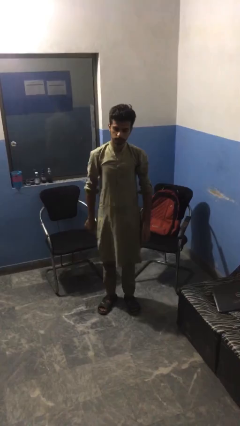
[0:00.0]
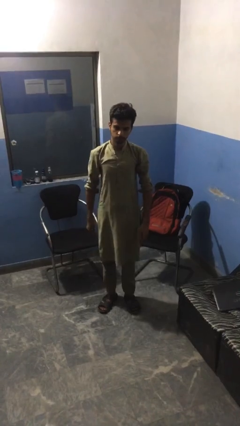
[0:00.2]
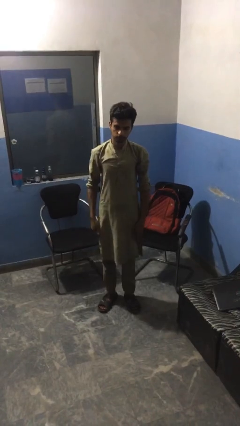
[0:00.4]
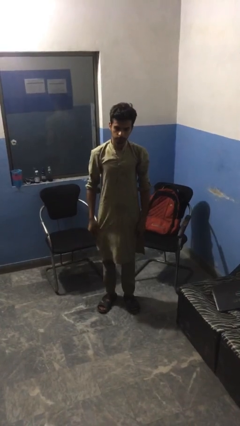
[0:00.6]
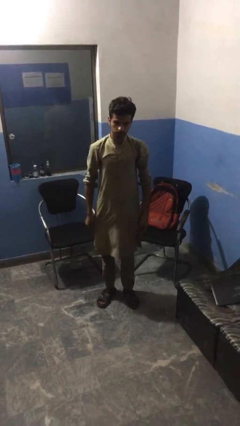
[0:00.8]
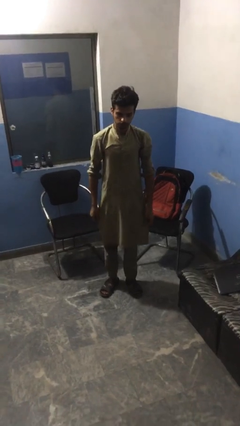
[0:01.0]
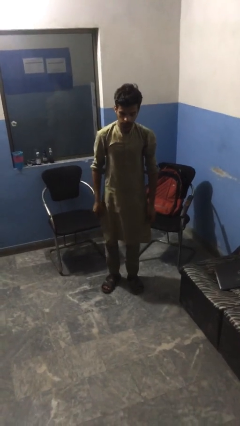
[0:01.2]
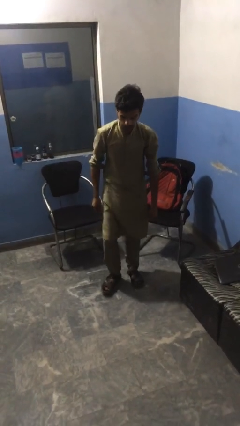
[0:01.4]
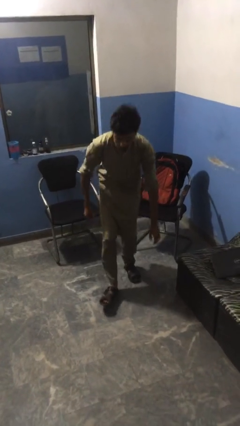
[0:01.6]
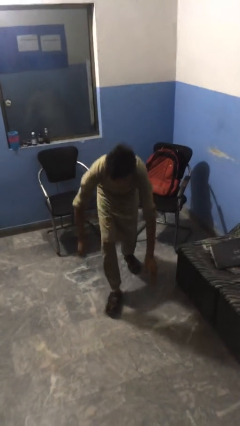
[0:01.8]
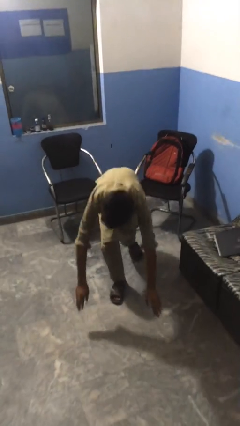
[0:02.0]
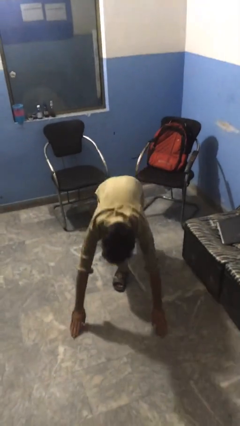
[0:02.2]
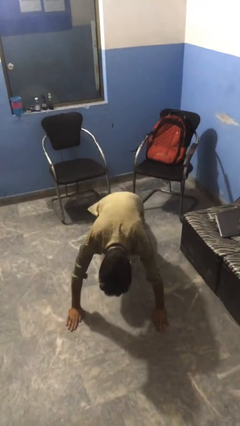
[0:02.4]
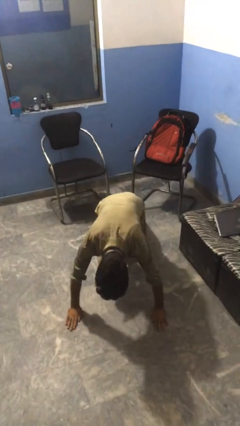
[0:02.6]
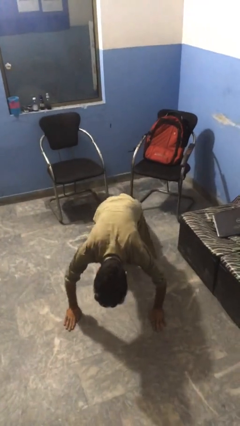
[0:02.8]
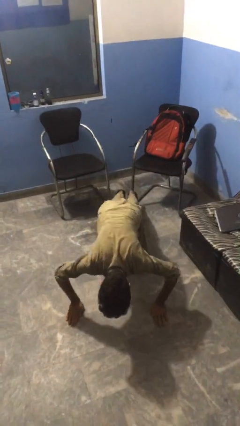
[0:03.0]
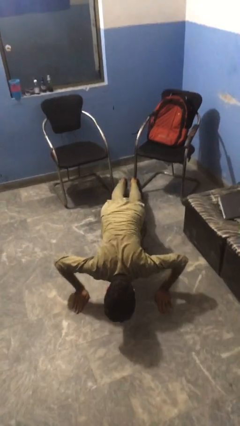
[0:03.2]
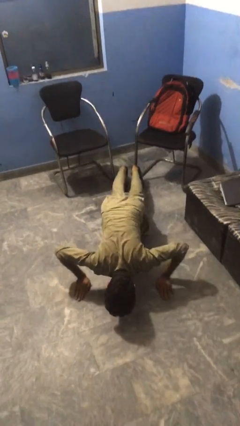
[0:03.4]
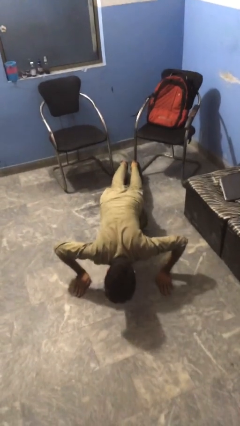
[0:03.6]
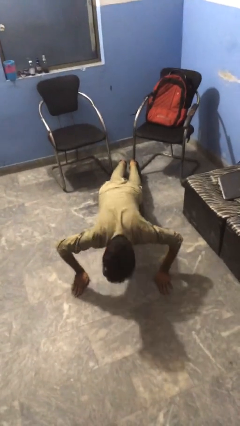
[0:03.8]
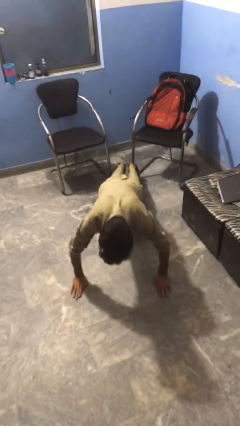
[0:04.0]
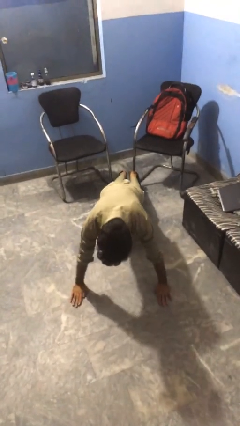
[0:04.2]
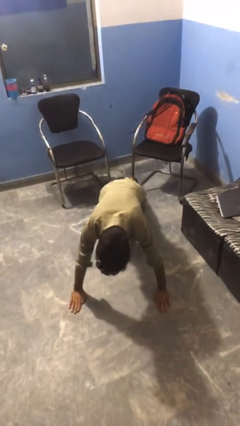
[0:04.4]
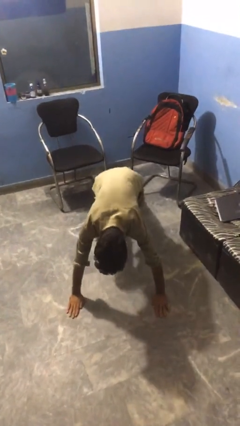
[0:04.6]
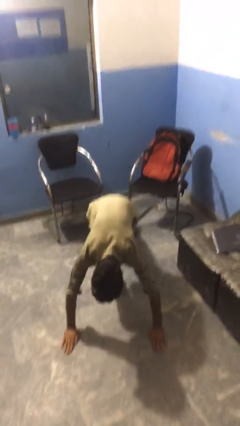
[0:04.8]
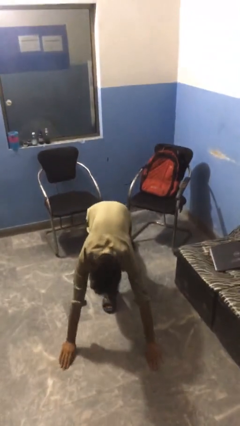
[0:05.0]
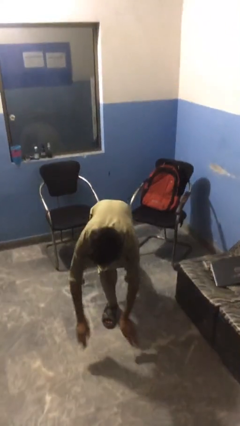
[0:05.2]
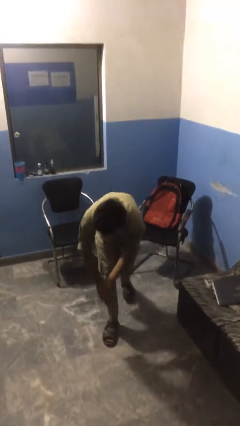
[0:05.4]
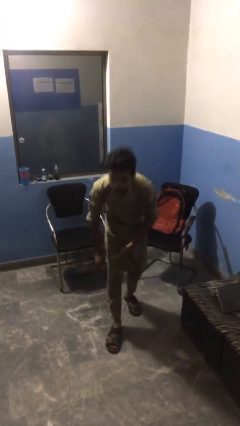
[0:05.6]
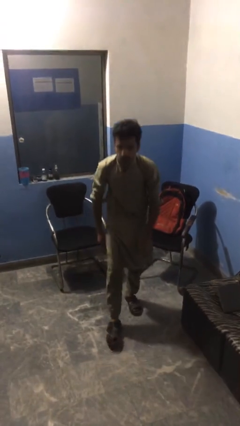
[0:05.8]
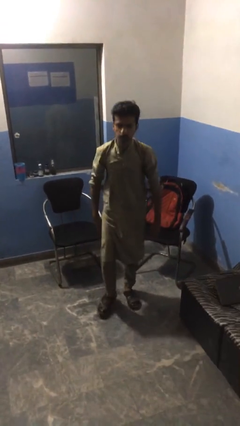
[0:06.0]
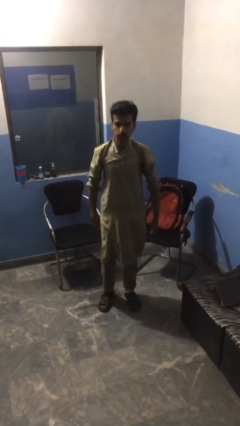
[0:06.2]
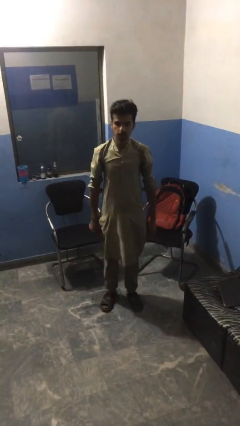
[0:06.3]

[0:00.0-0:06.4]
person exercises with pushup

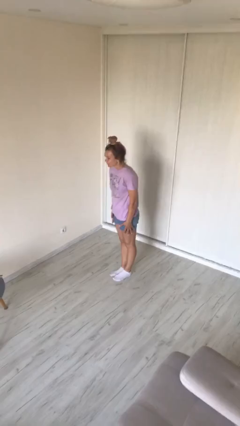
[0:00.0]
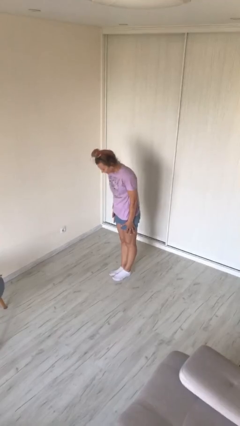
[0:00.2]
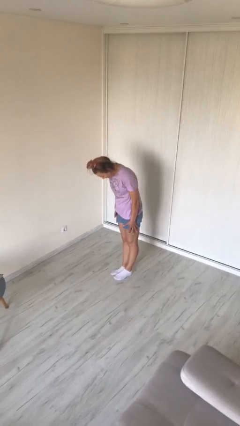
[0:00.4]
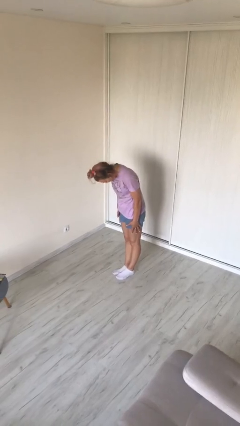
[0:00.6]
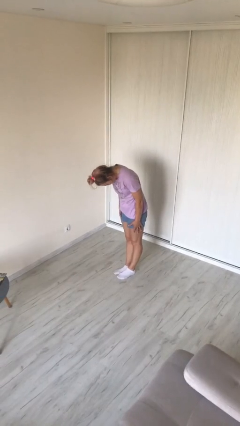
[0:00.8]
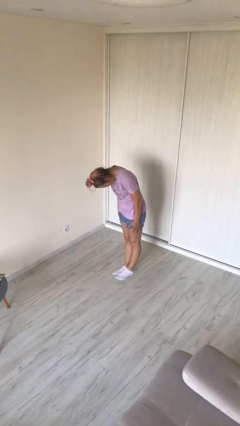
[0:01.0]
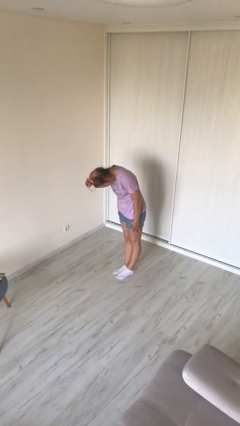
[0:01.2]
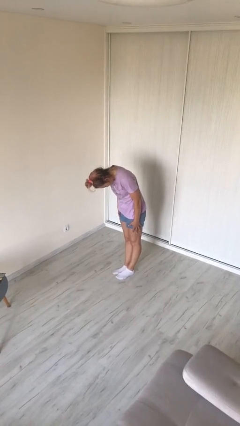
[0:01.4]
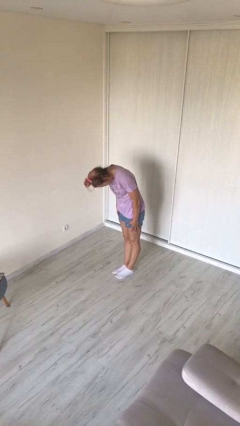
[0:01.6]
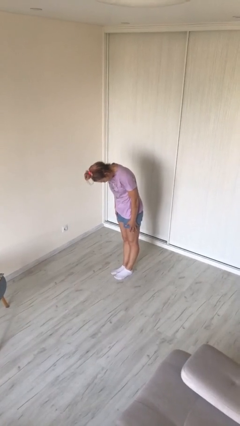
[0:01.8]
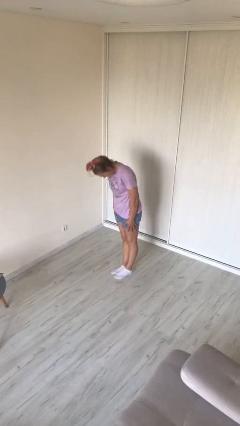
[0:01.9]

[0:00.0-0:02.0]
person bows

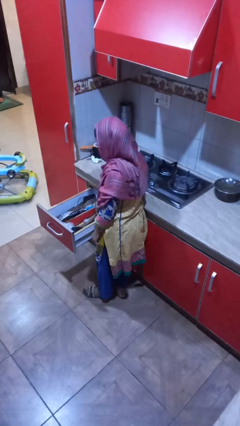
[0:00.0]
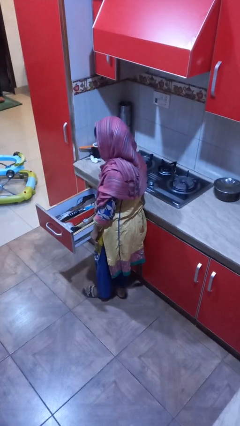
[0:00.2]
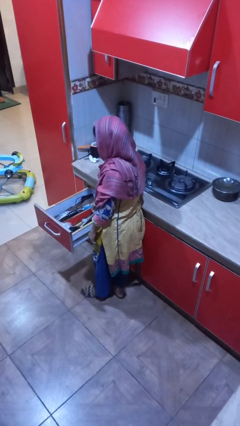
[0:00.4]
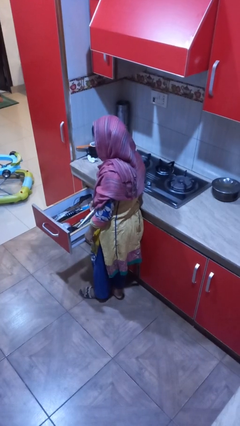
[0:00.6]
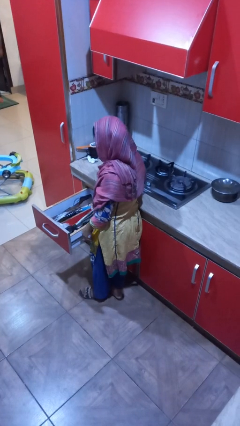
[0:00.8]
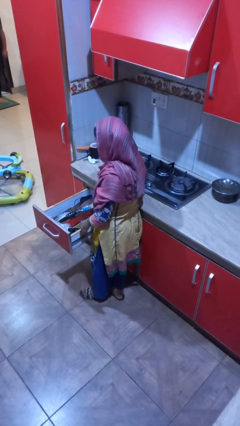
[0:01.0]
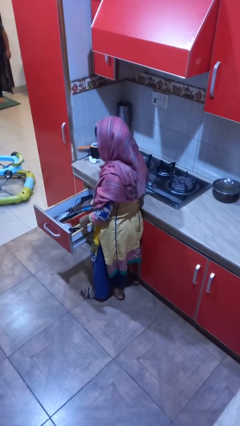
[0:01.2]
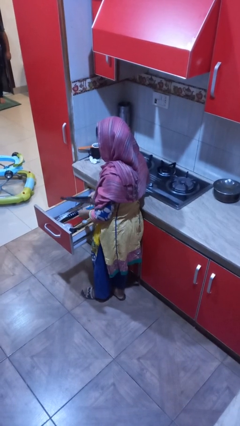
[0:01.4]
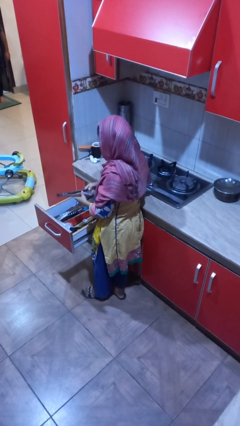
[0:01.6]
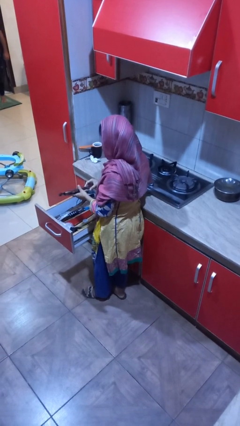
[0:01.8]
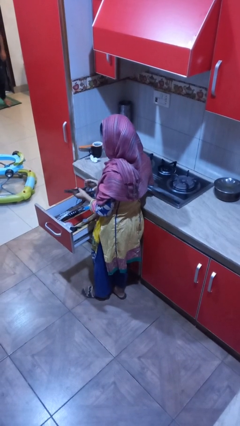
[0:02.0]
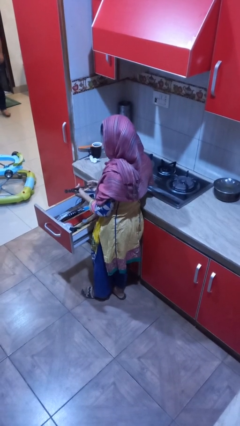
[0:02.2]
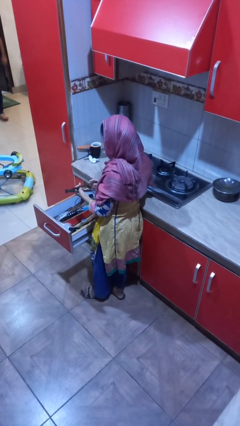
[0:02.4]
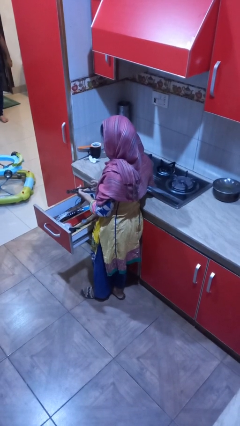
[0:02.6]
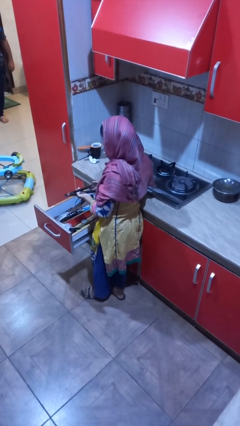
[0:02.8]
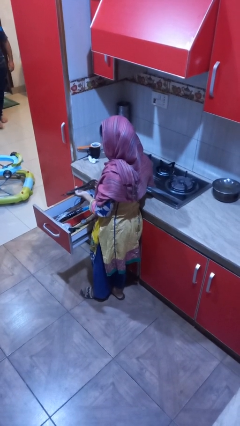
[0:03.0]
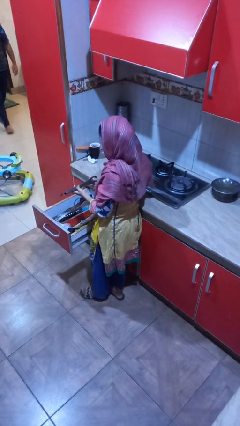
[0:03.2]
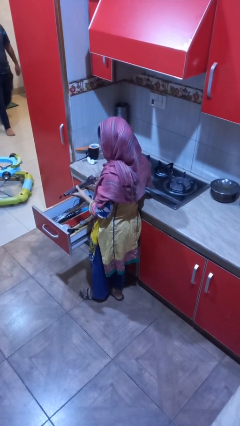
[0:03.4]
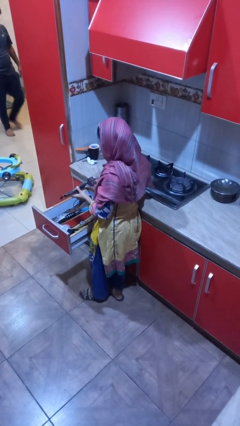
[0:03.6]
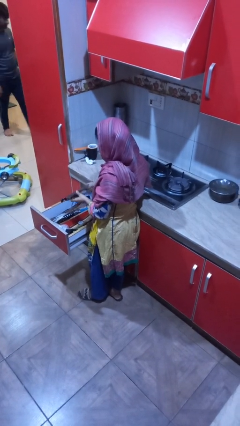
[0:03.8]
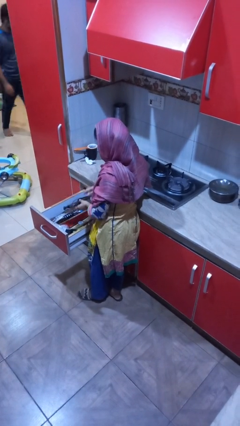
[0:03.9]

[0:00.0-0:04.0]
person takes object from kitchen drawer

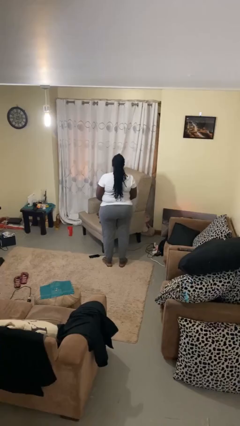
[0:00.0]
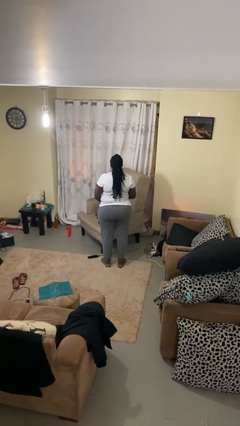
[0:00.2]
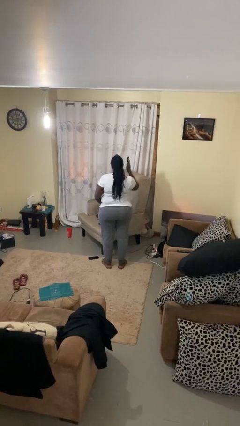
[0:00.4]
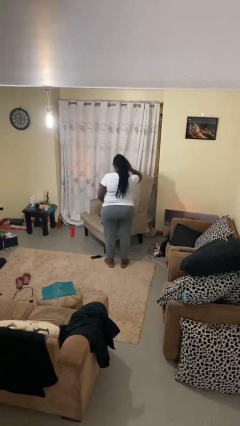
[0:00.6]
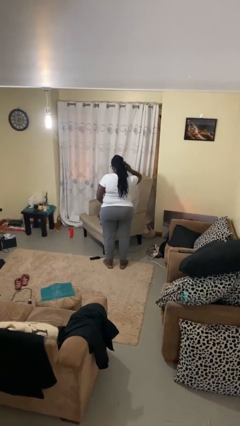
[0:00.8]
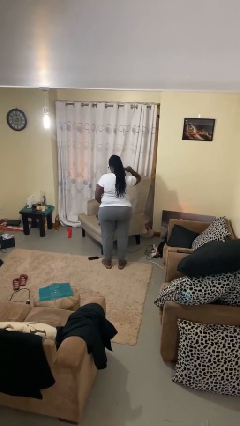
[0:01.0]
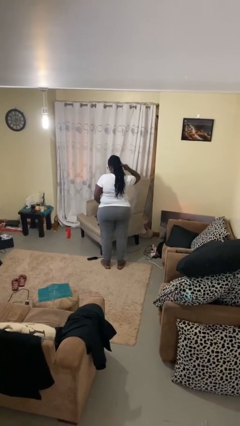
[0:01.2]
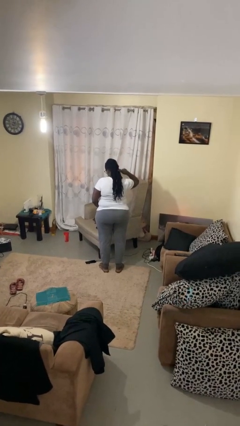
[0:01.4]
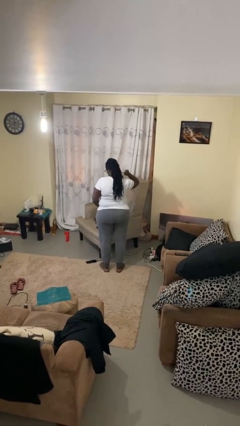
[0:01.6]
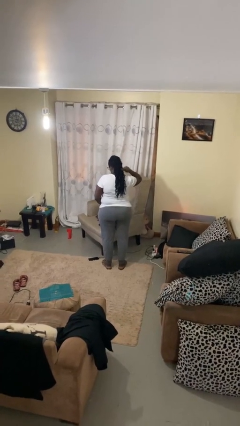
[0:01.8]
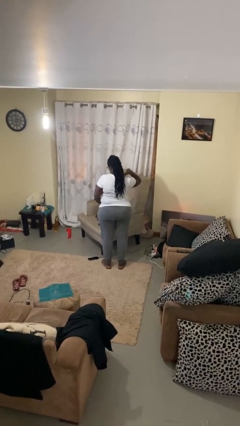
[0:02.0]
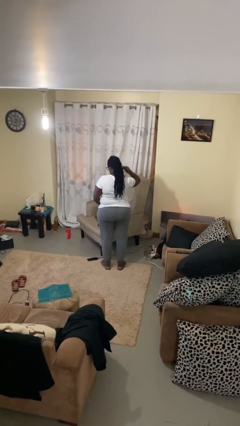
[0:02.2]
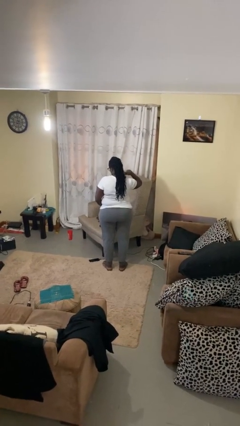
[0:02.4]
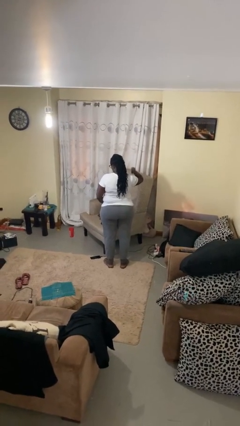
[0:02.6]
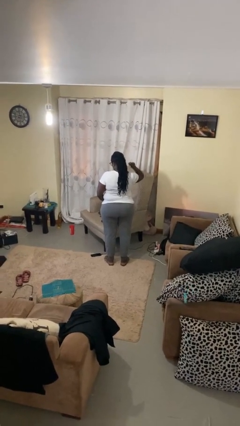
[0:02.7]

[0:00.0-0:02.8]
person brushes hair

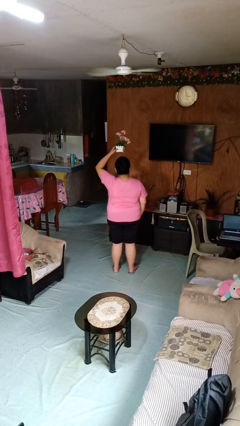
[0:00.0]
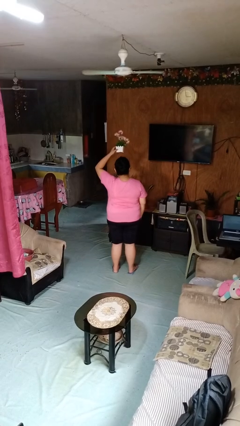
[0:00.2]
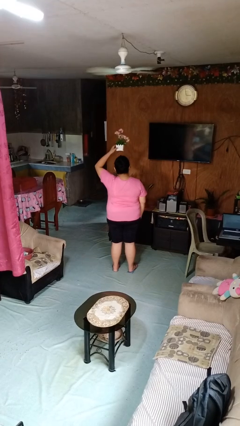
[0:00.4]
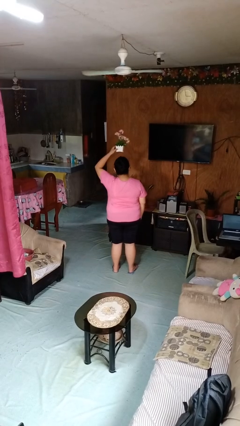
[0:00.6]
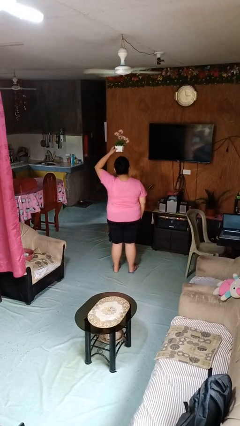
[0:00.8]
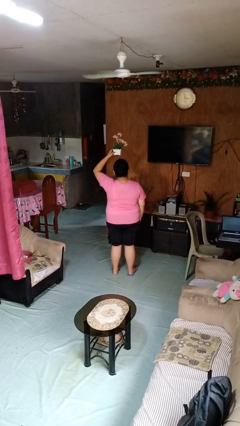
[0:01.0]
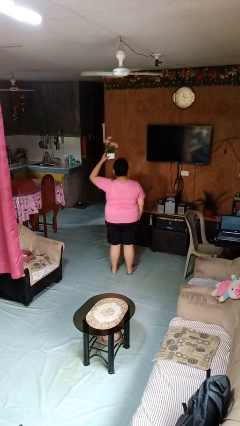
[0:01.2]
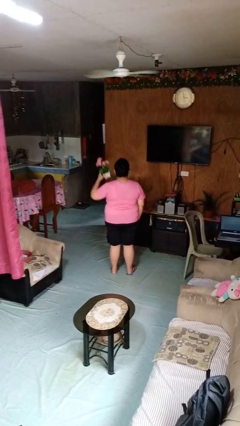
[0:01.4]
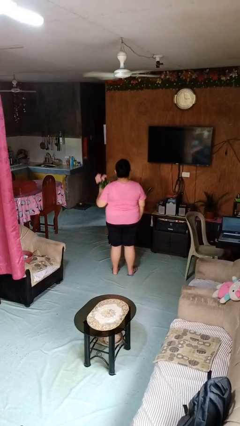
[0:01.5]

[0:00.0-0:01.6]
person holds object above head

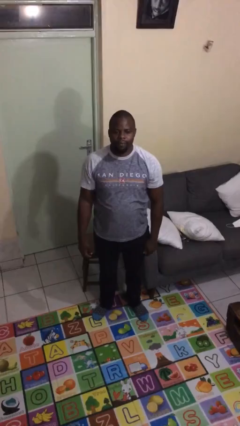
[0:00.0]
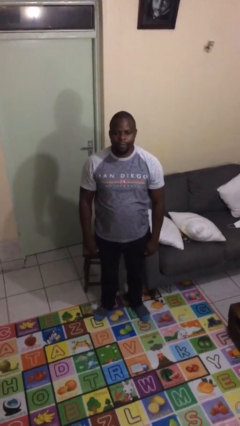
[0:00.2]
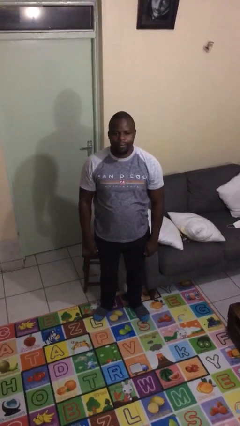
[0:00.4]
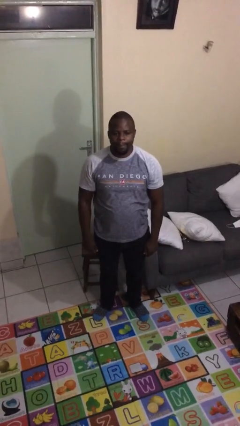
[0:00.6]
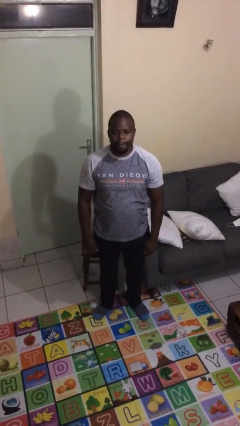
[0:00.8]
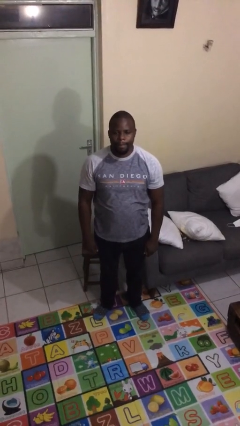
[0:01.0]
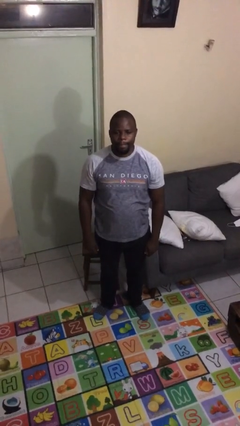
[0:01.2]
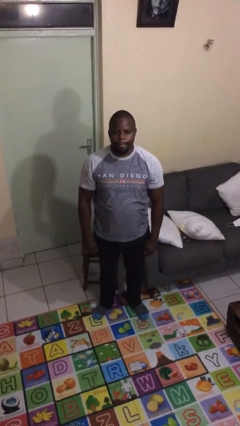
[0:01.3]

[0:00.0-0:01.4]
person gestures swipe right
